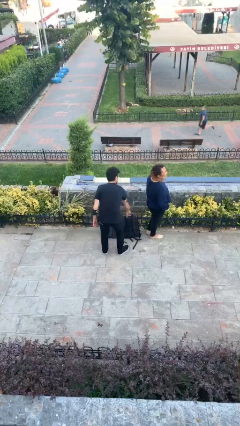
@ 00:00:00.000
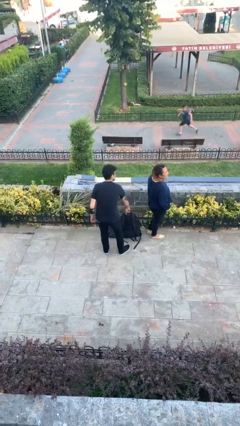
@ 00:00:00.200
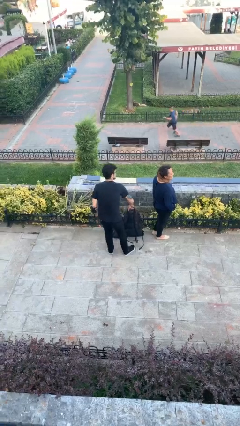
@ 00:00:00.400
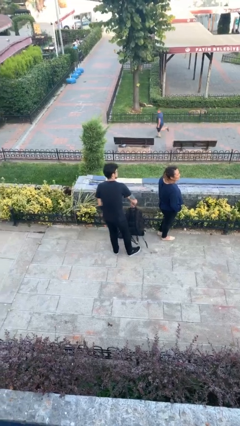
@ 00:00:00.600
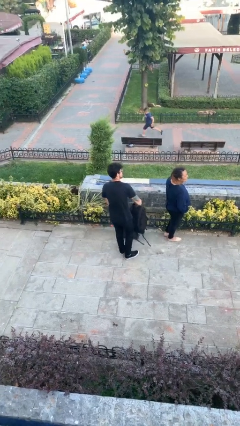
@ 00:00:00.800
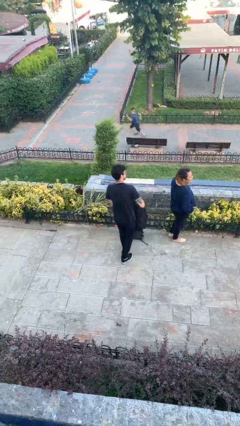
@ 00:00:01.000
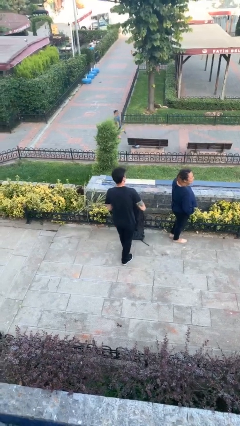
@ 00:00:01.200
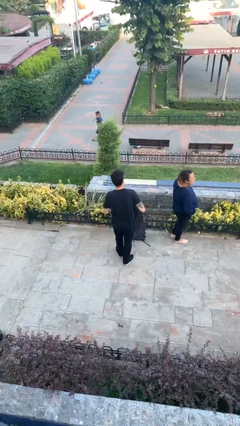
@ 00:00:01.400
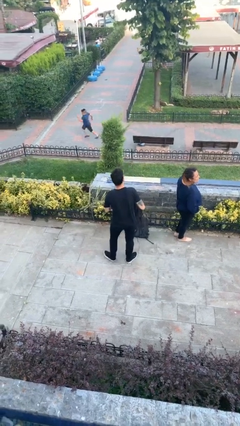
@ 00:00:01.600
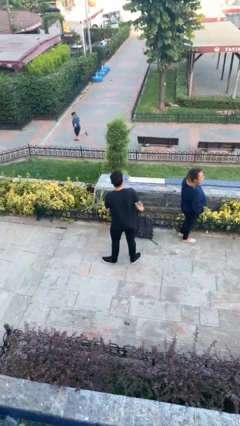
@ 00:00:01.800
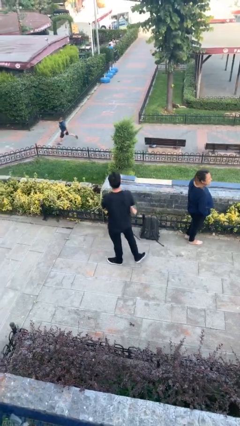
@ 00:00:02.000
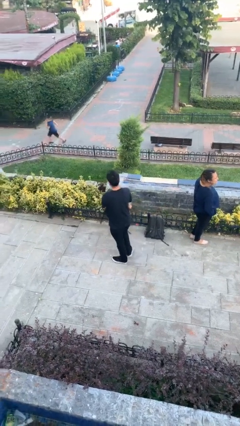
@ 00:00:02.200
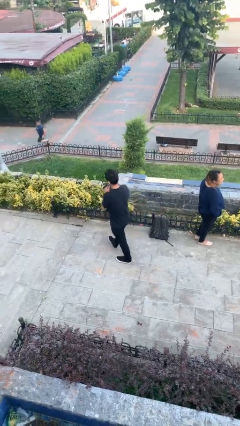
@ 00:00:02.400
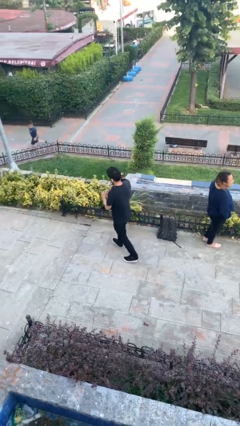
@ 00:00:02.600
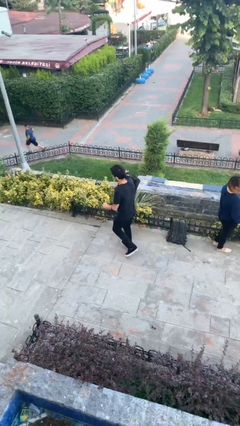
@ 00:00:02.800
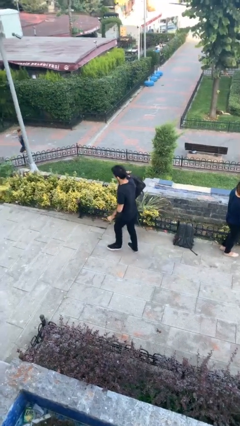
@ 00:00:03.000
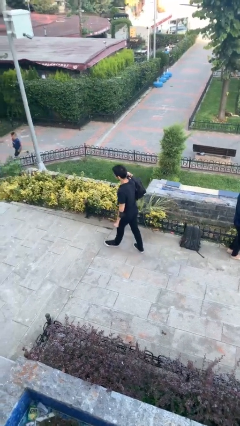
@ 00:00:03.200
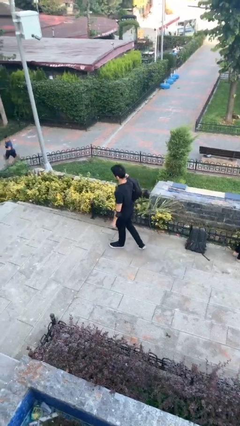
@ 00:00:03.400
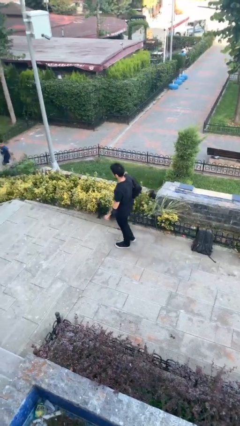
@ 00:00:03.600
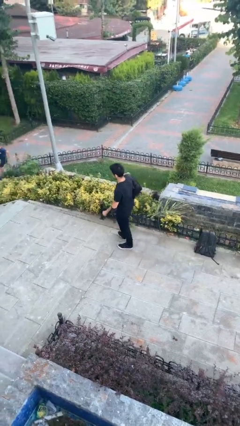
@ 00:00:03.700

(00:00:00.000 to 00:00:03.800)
person steals object from person

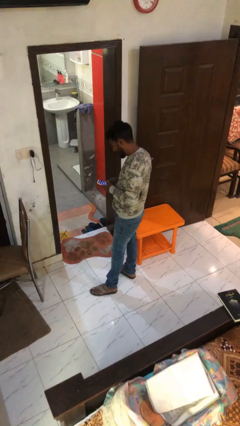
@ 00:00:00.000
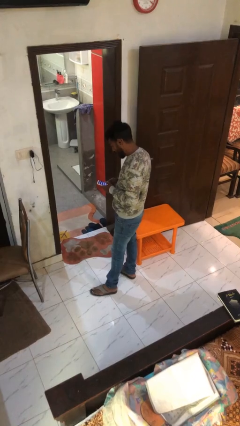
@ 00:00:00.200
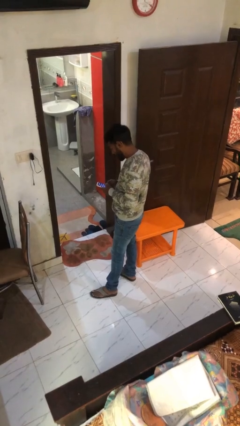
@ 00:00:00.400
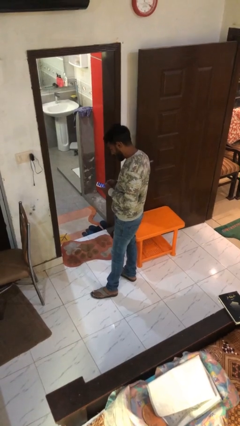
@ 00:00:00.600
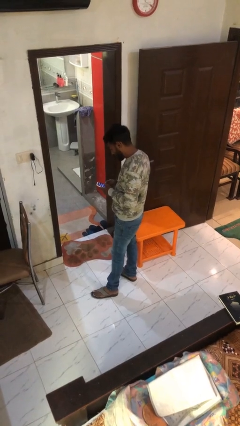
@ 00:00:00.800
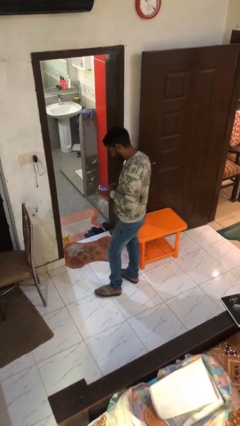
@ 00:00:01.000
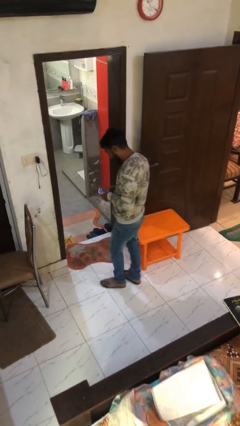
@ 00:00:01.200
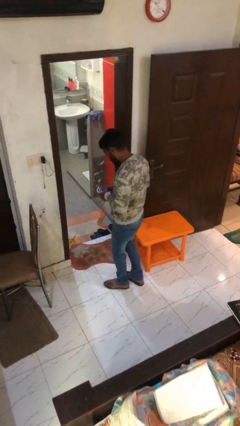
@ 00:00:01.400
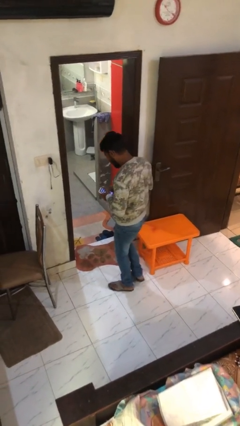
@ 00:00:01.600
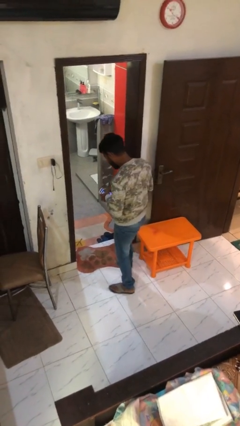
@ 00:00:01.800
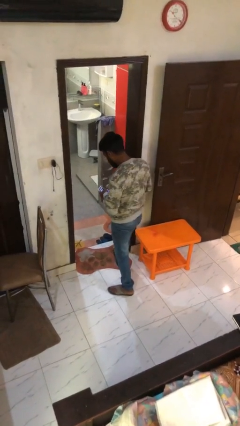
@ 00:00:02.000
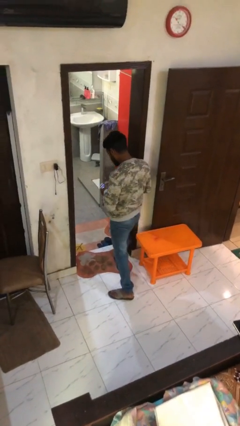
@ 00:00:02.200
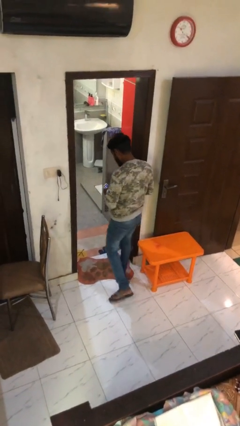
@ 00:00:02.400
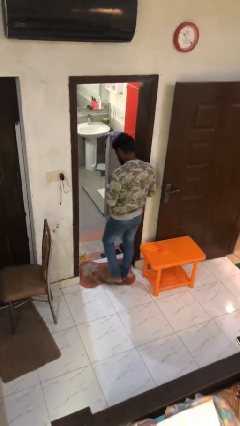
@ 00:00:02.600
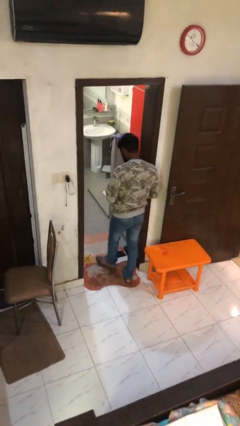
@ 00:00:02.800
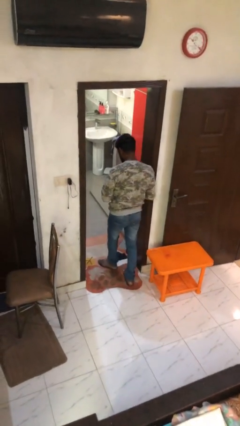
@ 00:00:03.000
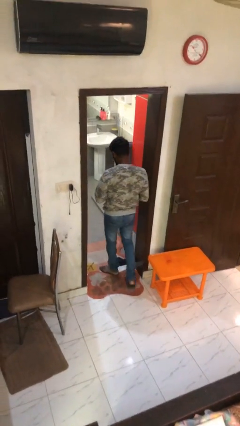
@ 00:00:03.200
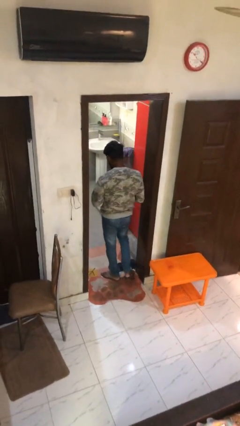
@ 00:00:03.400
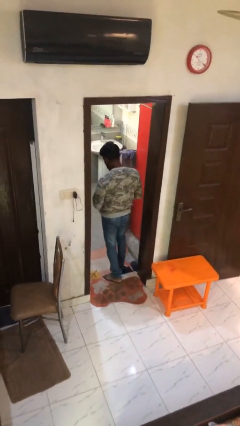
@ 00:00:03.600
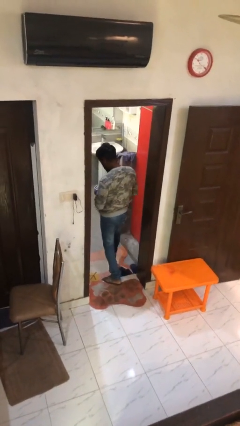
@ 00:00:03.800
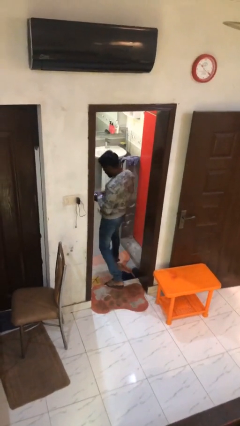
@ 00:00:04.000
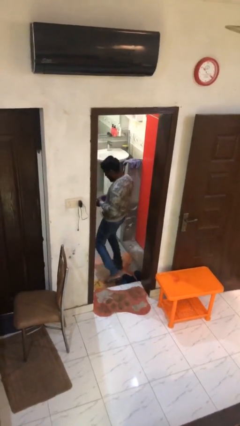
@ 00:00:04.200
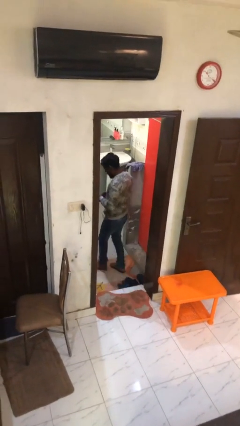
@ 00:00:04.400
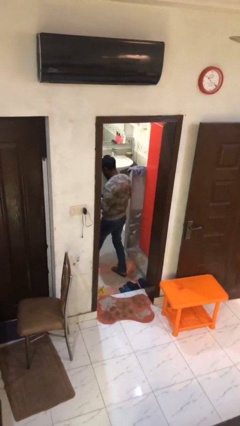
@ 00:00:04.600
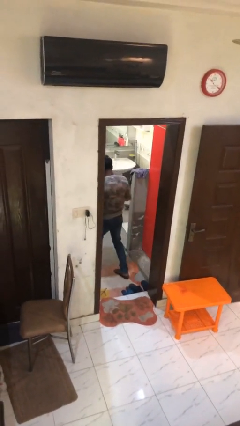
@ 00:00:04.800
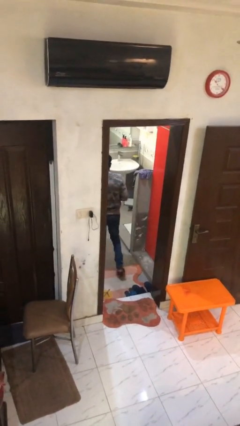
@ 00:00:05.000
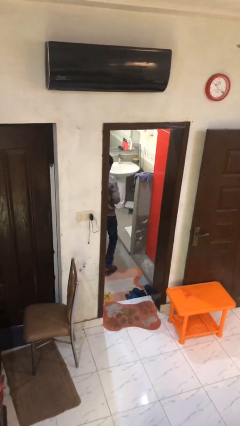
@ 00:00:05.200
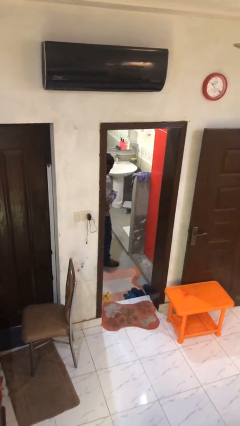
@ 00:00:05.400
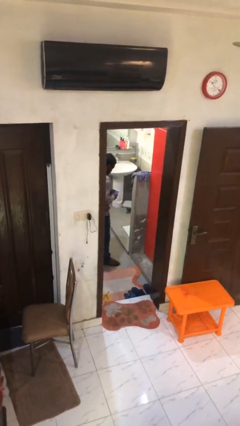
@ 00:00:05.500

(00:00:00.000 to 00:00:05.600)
person exits scene through structure

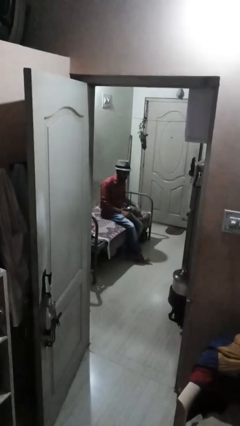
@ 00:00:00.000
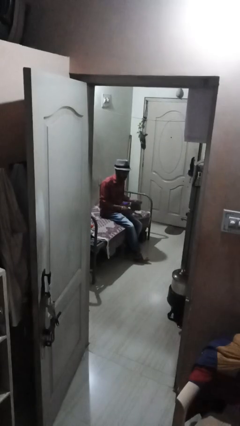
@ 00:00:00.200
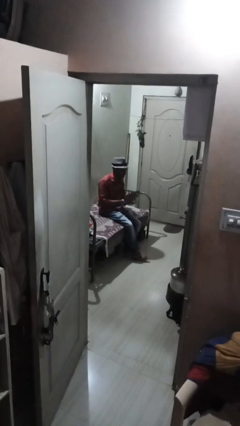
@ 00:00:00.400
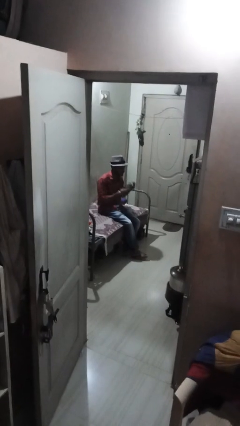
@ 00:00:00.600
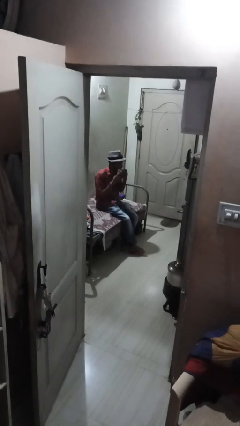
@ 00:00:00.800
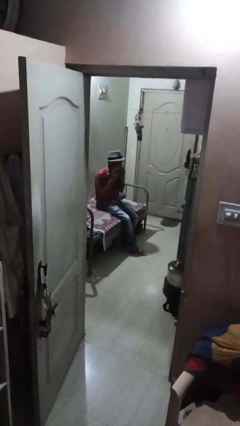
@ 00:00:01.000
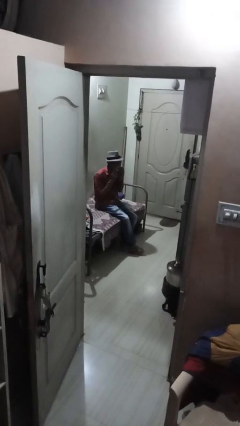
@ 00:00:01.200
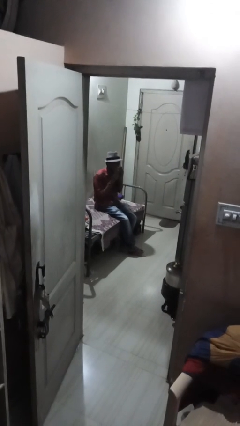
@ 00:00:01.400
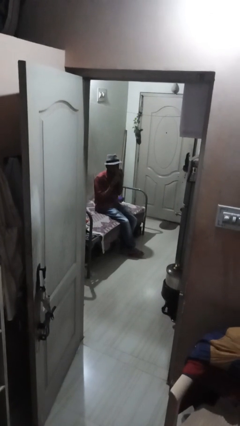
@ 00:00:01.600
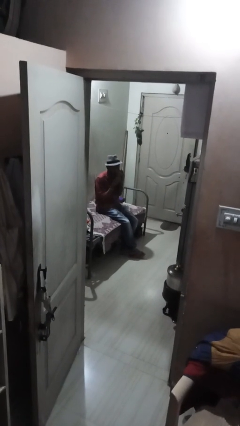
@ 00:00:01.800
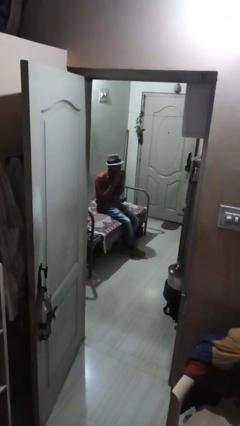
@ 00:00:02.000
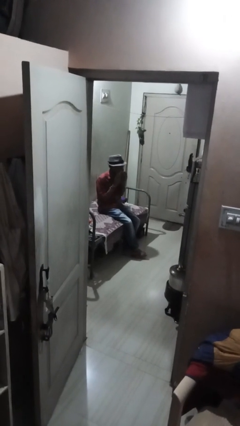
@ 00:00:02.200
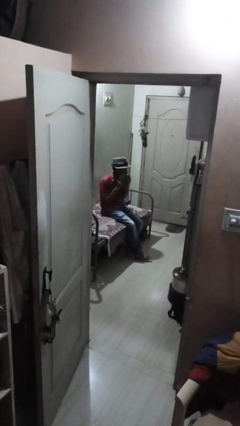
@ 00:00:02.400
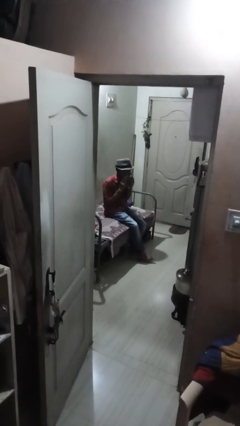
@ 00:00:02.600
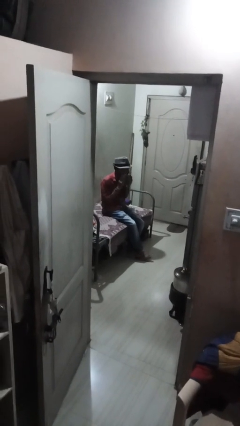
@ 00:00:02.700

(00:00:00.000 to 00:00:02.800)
person wipes mouth with napkin

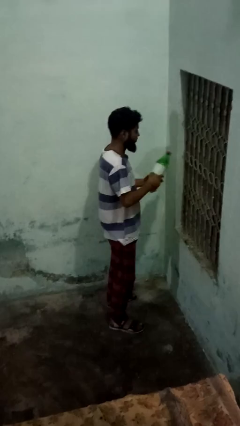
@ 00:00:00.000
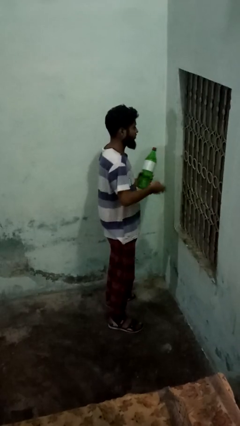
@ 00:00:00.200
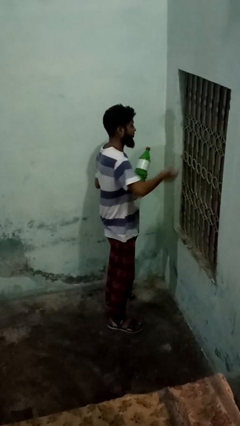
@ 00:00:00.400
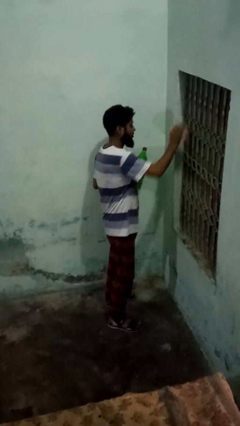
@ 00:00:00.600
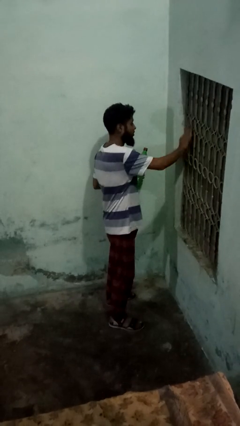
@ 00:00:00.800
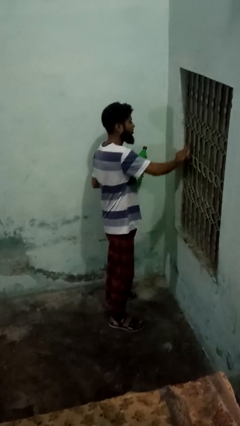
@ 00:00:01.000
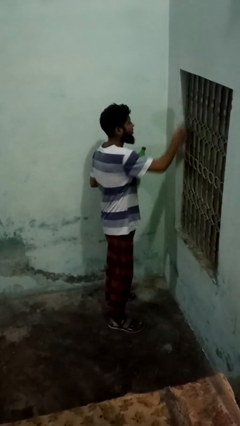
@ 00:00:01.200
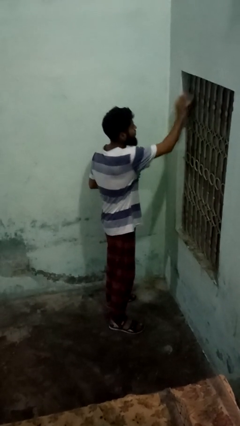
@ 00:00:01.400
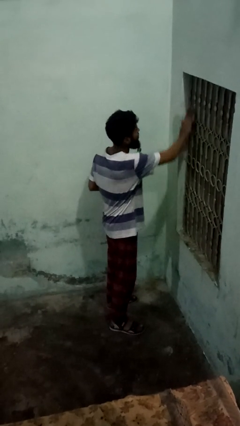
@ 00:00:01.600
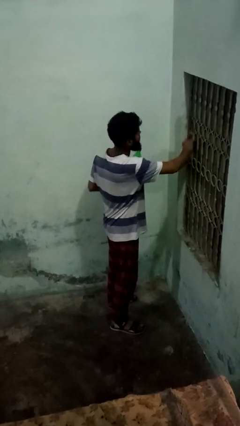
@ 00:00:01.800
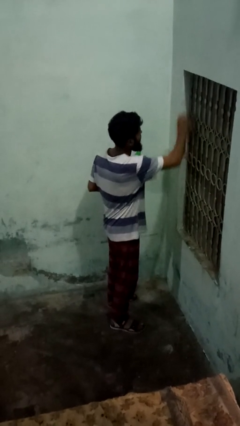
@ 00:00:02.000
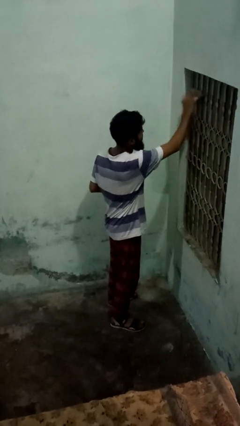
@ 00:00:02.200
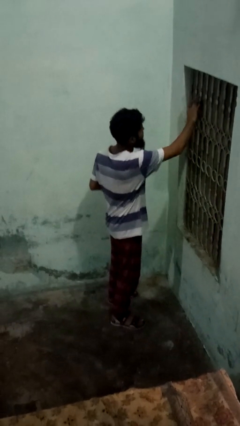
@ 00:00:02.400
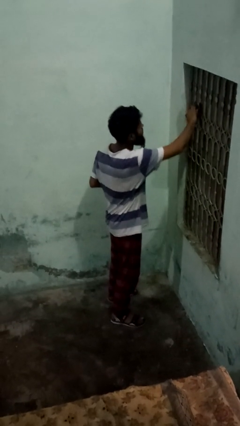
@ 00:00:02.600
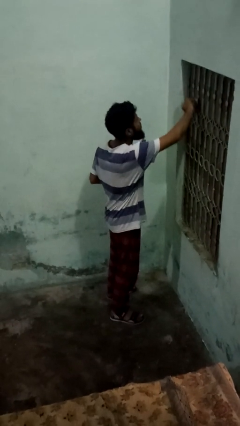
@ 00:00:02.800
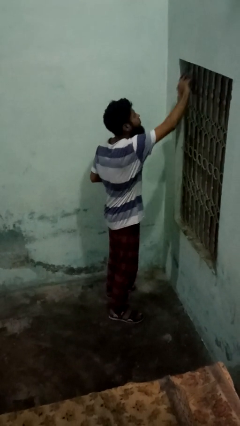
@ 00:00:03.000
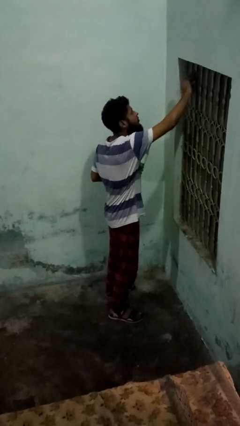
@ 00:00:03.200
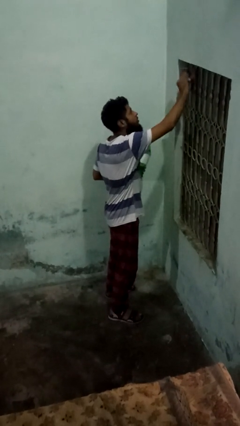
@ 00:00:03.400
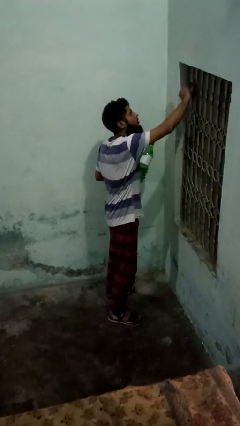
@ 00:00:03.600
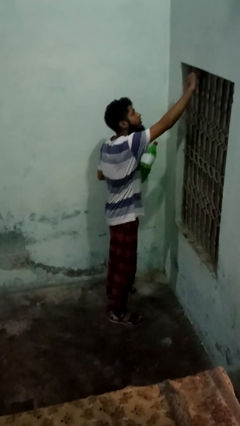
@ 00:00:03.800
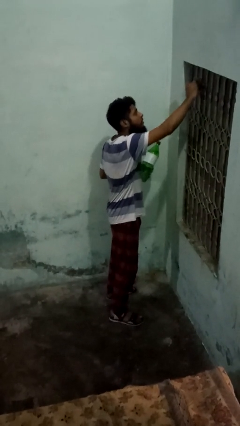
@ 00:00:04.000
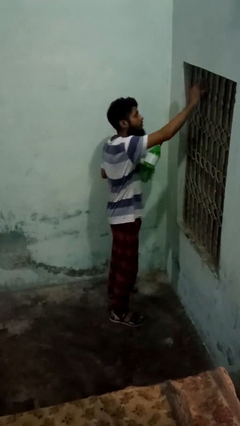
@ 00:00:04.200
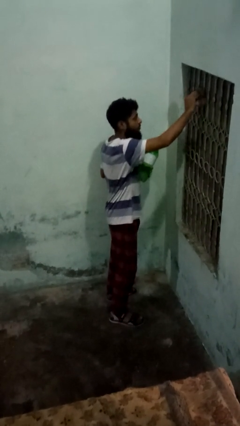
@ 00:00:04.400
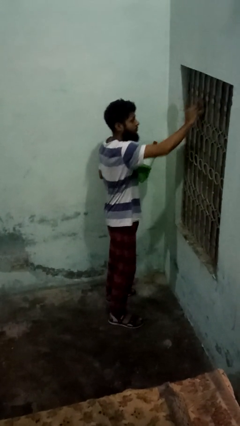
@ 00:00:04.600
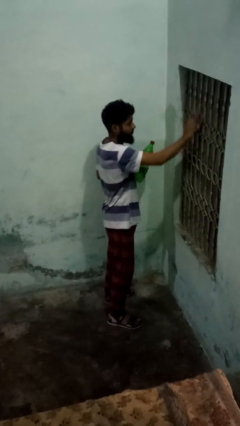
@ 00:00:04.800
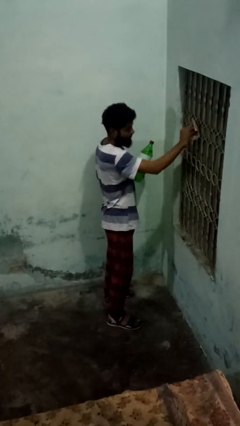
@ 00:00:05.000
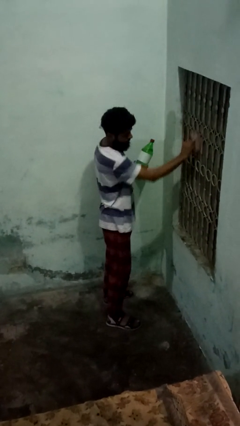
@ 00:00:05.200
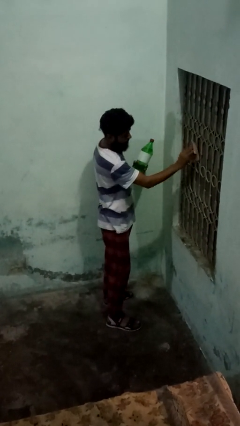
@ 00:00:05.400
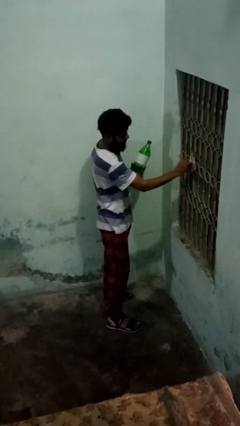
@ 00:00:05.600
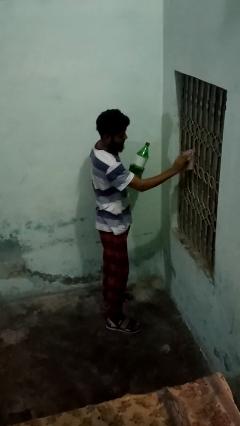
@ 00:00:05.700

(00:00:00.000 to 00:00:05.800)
person washes window
